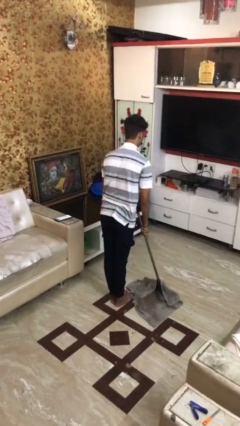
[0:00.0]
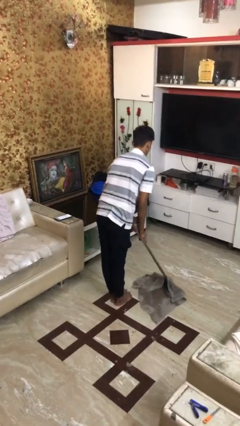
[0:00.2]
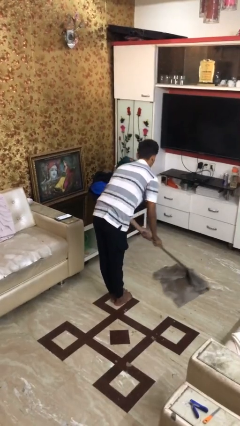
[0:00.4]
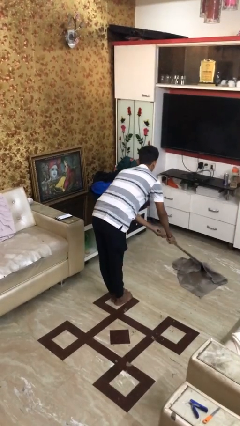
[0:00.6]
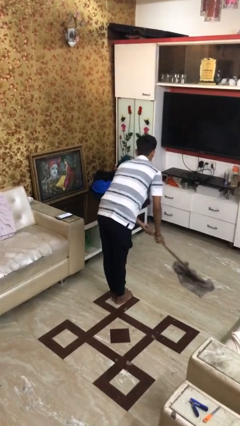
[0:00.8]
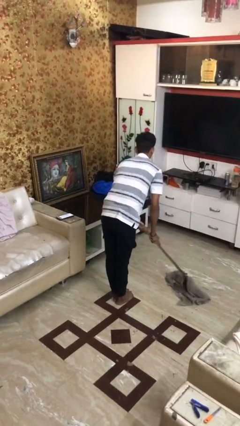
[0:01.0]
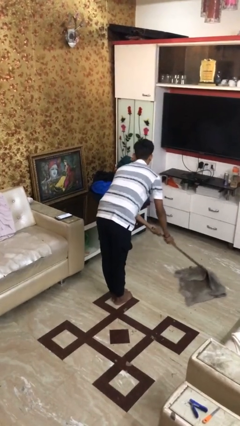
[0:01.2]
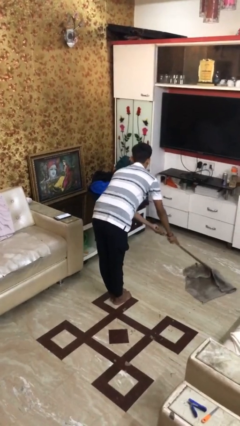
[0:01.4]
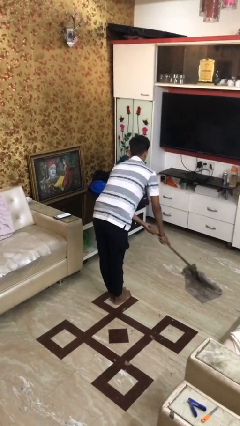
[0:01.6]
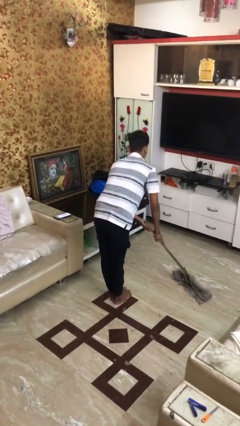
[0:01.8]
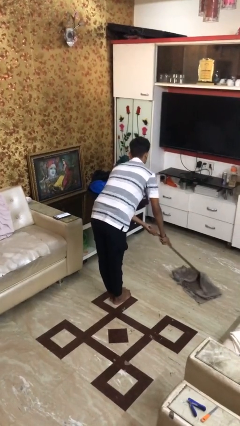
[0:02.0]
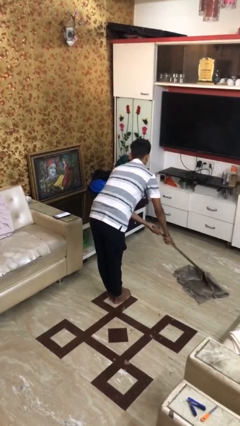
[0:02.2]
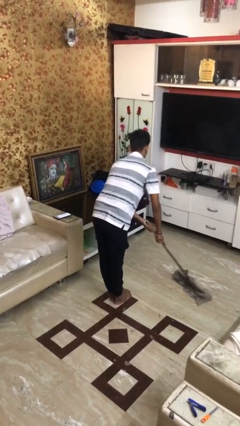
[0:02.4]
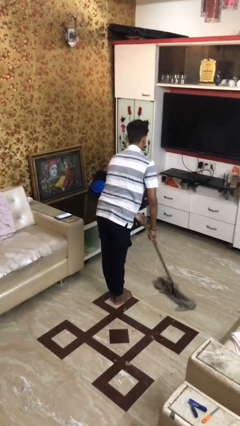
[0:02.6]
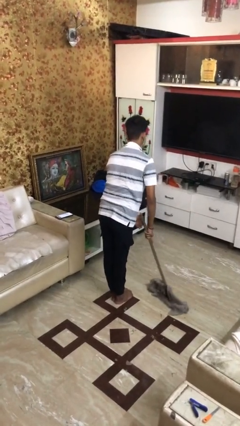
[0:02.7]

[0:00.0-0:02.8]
person mops

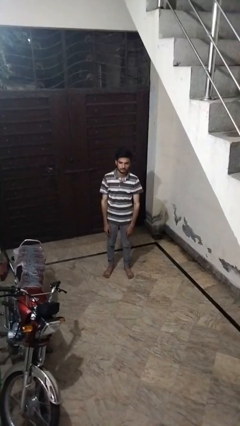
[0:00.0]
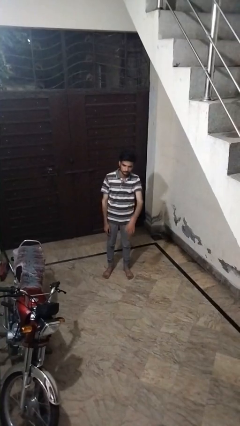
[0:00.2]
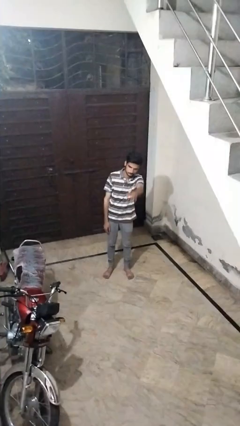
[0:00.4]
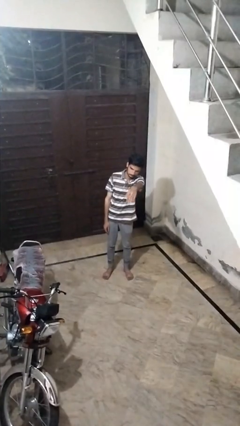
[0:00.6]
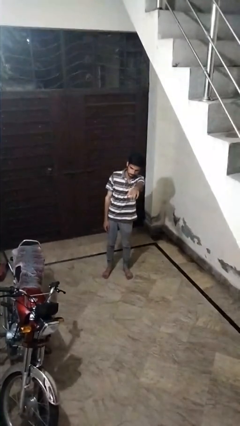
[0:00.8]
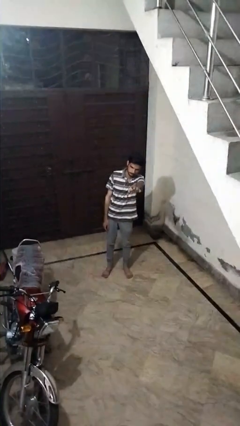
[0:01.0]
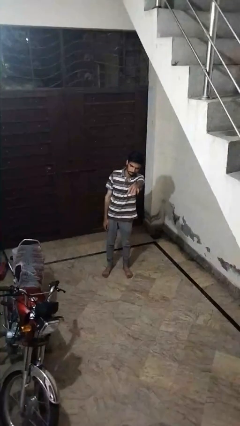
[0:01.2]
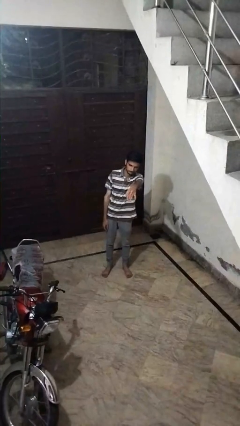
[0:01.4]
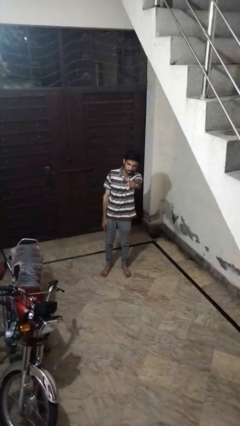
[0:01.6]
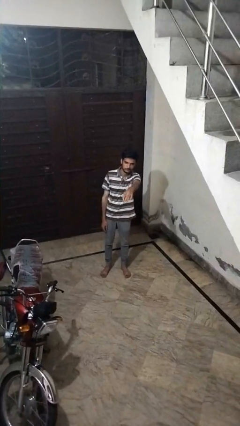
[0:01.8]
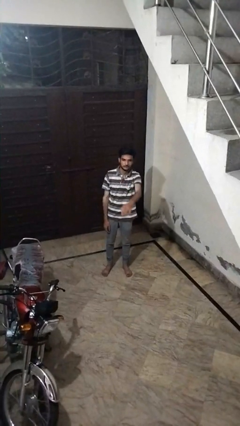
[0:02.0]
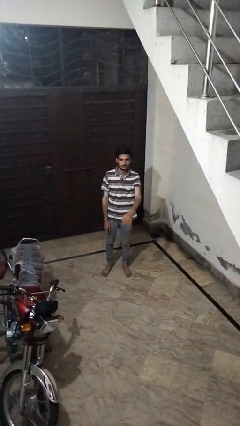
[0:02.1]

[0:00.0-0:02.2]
person gestures come here

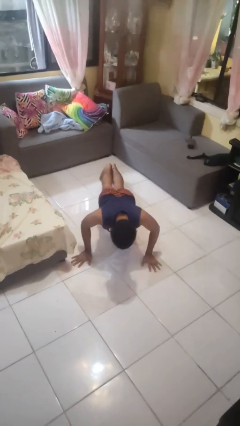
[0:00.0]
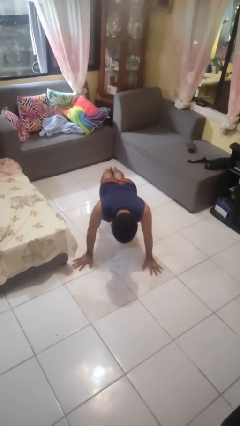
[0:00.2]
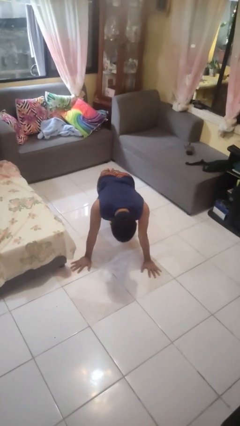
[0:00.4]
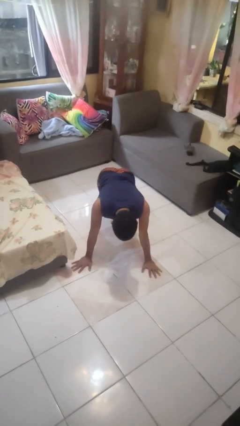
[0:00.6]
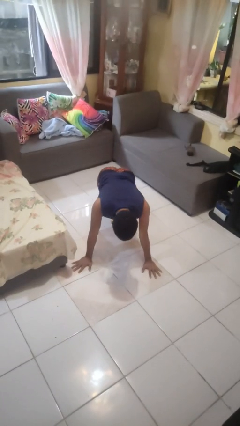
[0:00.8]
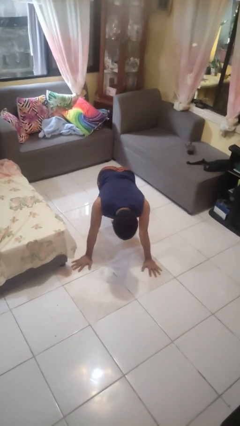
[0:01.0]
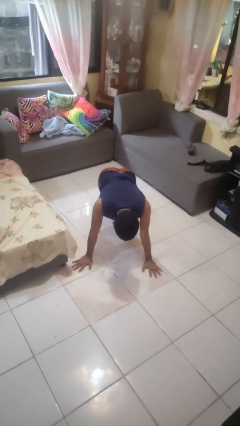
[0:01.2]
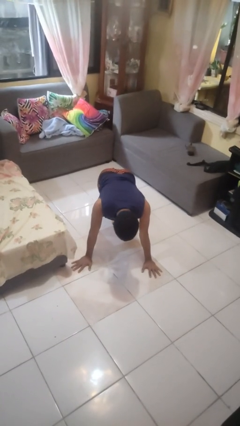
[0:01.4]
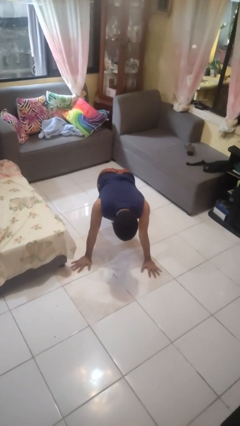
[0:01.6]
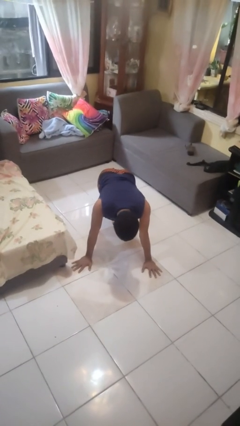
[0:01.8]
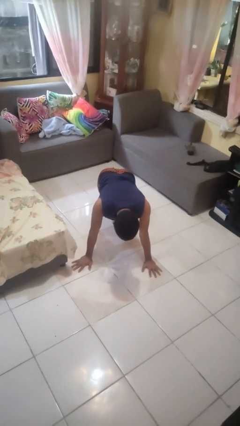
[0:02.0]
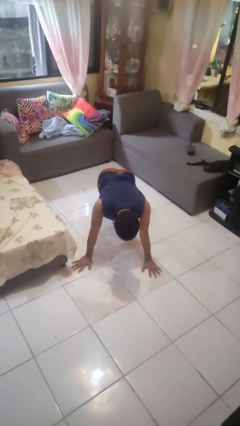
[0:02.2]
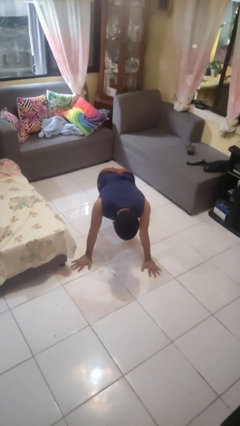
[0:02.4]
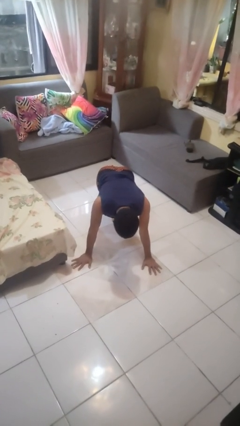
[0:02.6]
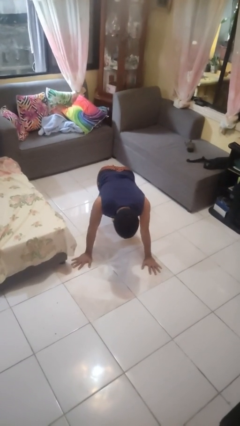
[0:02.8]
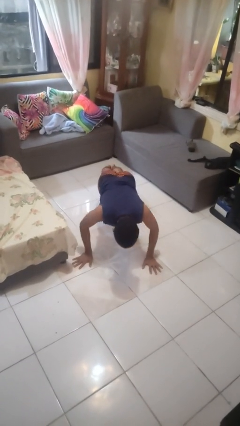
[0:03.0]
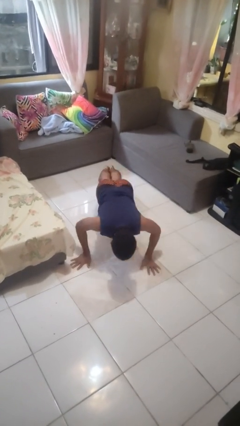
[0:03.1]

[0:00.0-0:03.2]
person exercises with pushup

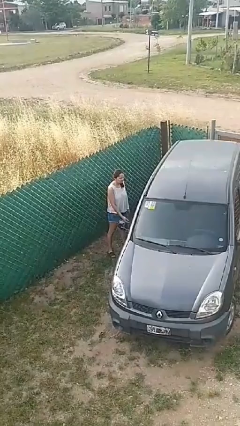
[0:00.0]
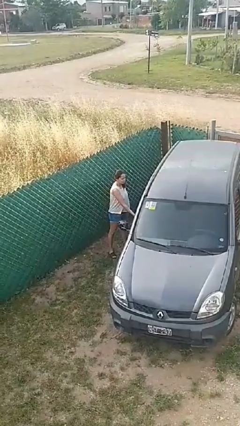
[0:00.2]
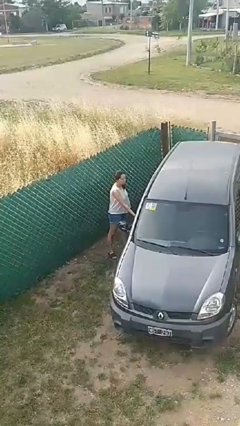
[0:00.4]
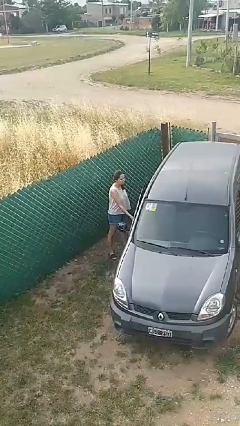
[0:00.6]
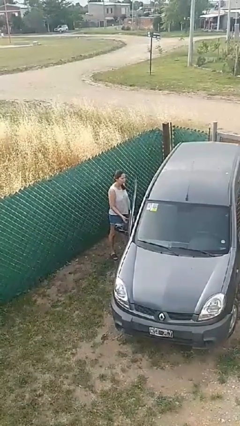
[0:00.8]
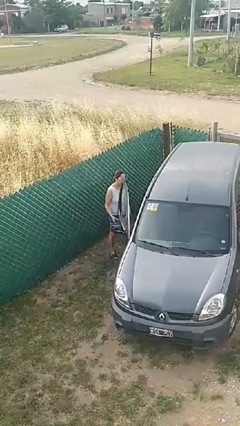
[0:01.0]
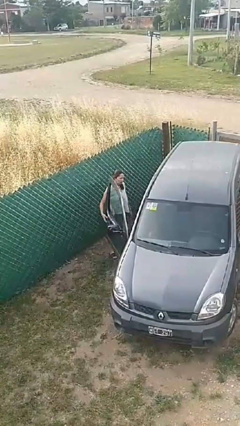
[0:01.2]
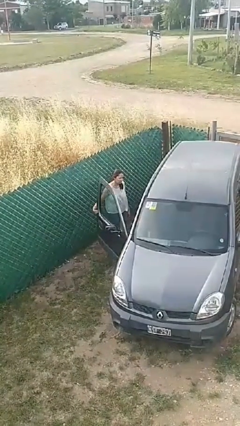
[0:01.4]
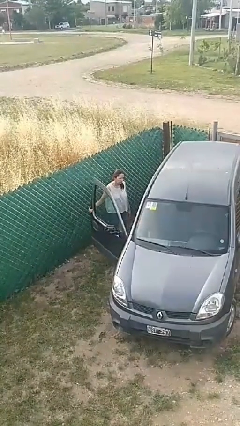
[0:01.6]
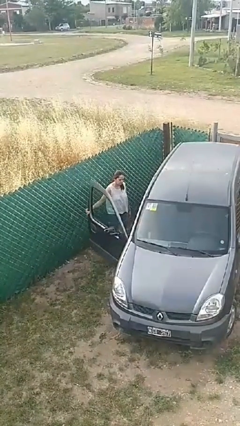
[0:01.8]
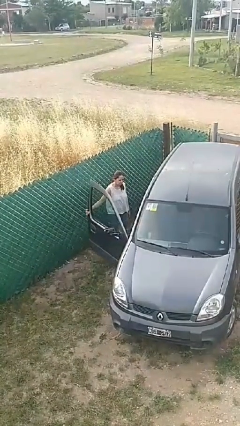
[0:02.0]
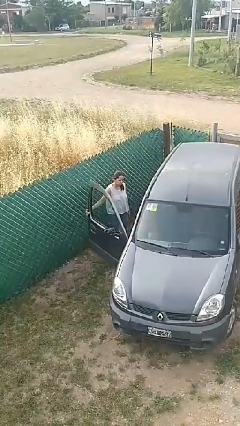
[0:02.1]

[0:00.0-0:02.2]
person opens car door

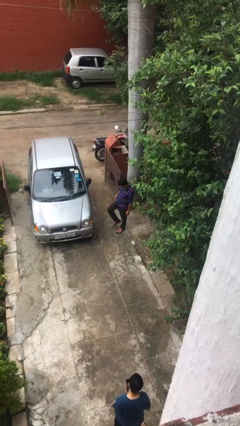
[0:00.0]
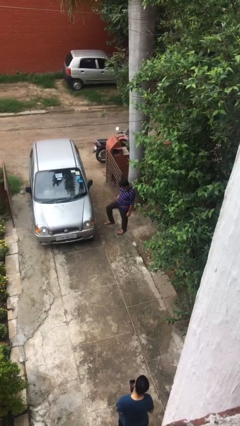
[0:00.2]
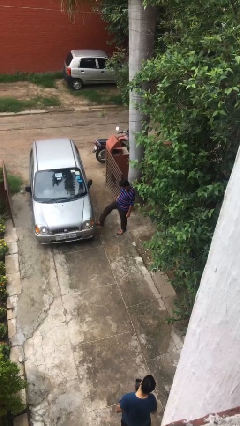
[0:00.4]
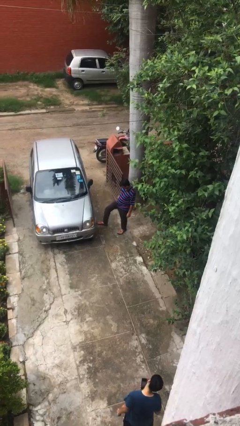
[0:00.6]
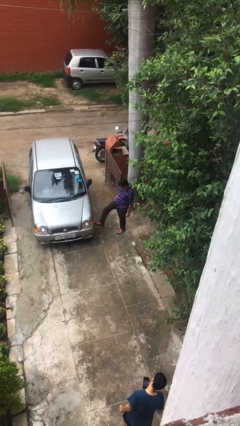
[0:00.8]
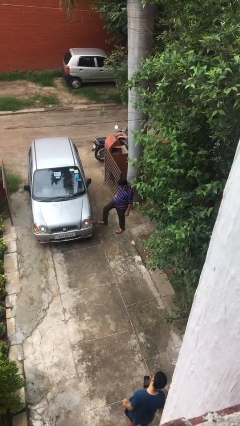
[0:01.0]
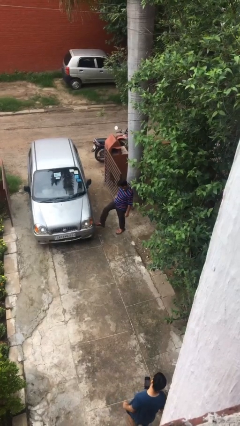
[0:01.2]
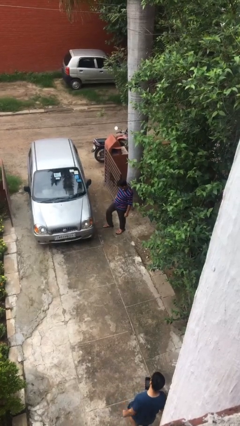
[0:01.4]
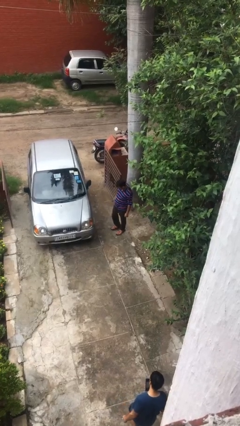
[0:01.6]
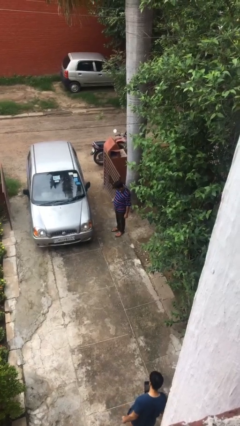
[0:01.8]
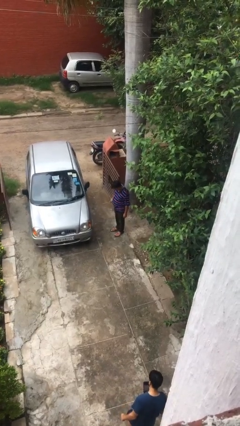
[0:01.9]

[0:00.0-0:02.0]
person kicks car tires

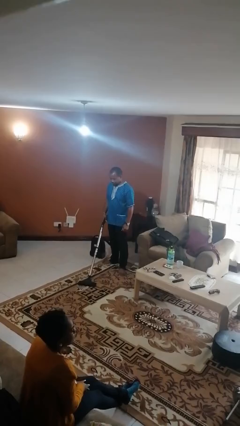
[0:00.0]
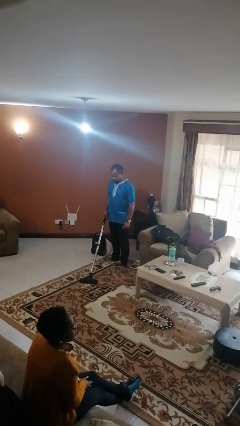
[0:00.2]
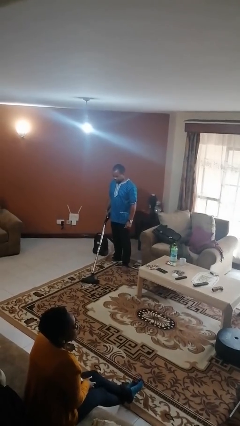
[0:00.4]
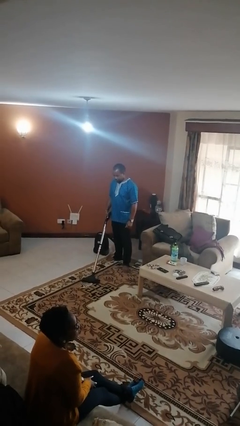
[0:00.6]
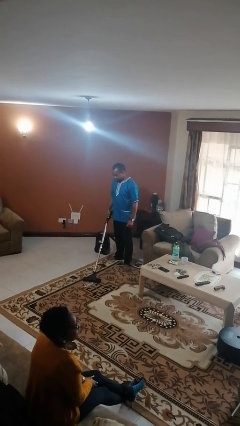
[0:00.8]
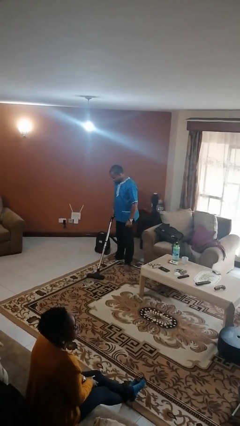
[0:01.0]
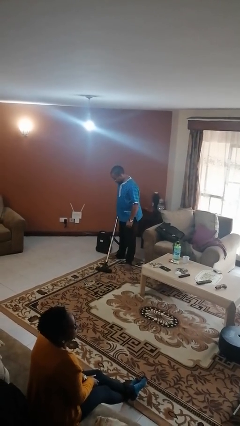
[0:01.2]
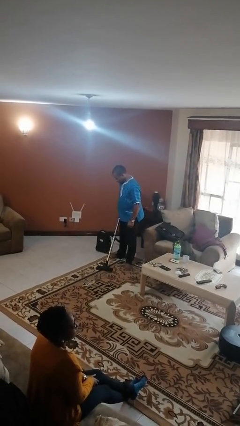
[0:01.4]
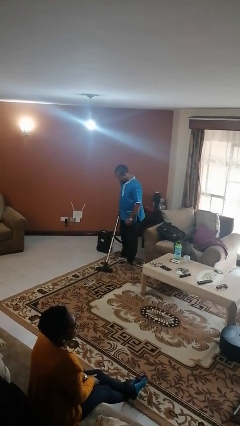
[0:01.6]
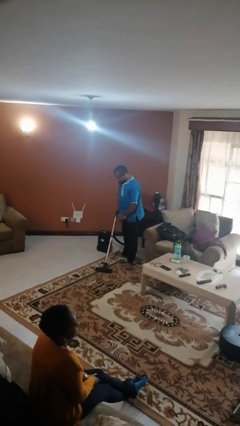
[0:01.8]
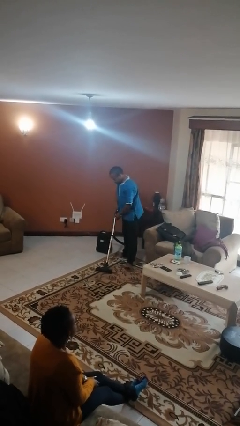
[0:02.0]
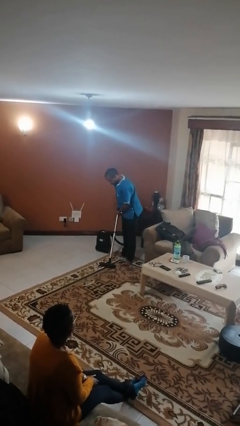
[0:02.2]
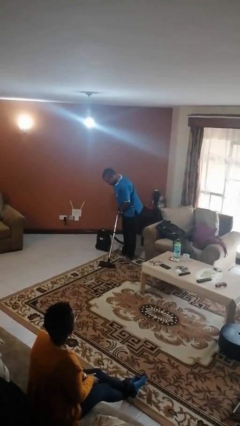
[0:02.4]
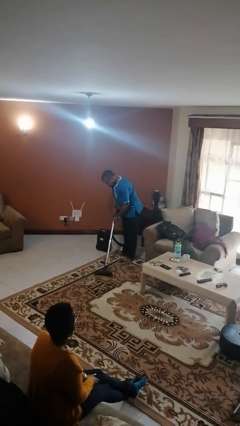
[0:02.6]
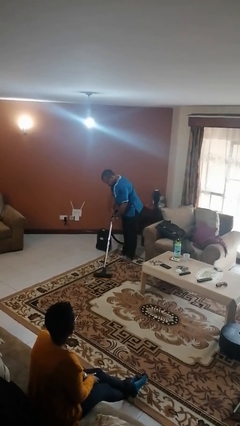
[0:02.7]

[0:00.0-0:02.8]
person vacuums carpet

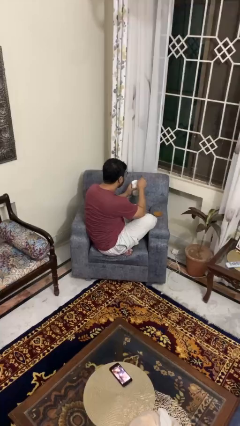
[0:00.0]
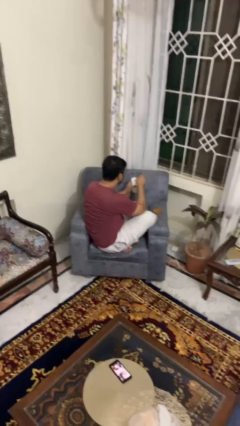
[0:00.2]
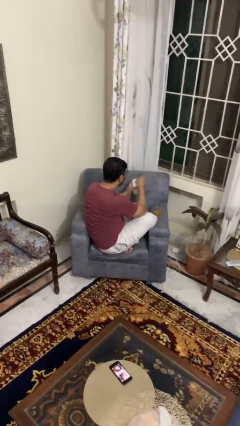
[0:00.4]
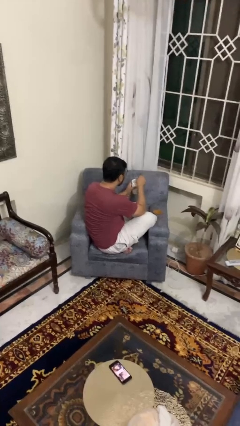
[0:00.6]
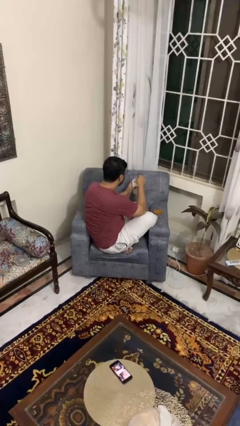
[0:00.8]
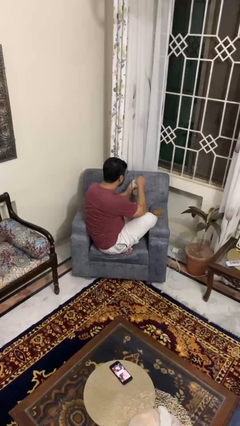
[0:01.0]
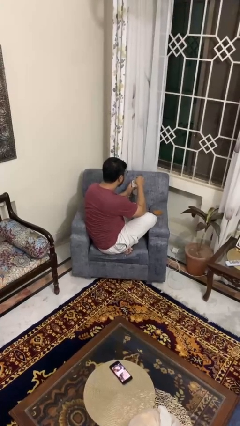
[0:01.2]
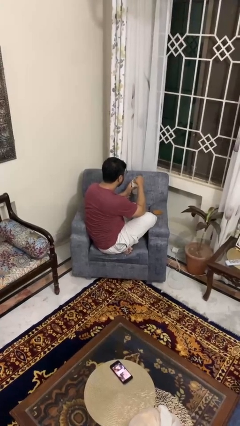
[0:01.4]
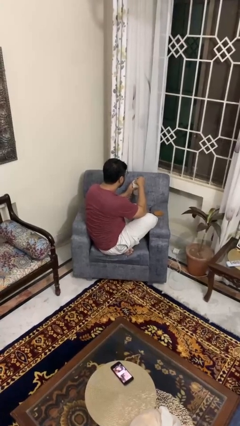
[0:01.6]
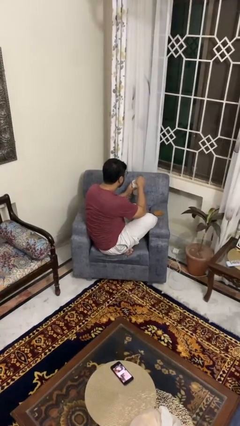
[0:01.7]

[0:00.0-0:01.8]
person stirs mug
